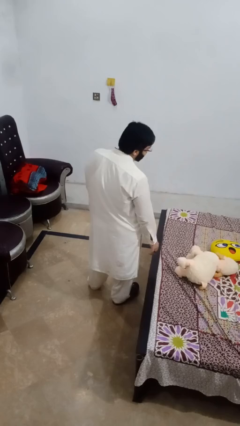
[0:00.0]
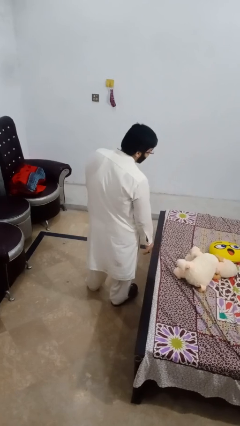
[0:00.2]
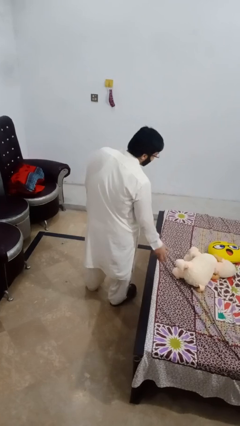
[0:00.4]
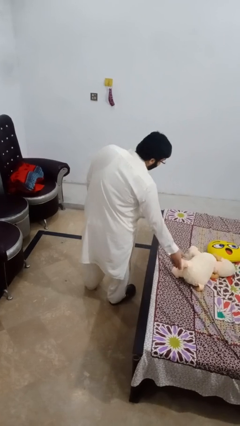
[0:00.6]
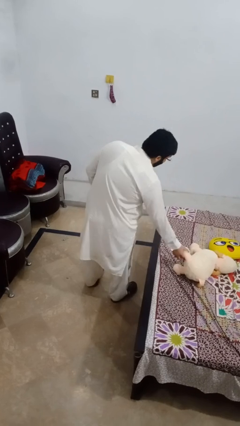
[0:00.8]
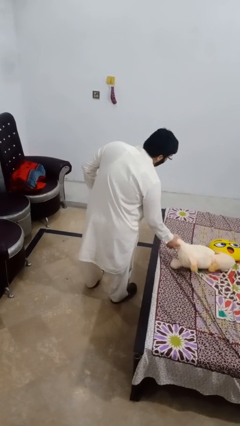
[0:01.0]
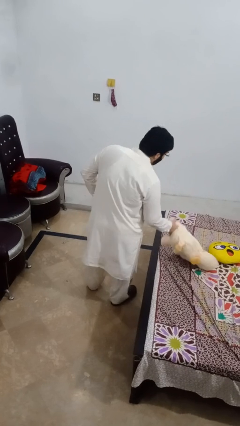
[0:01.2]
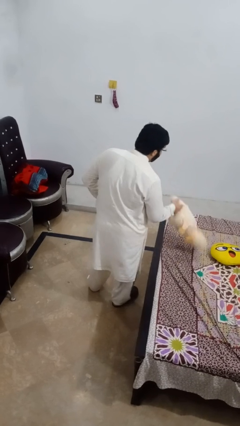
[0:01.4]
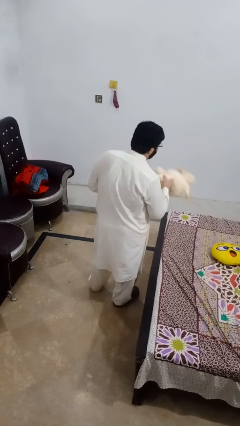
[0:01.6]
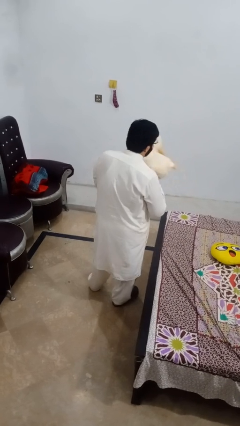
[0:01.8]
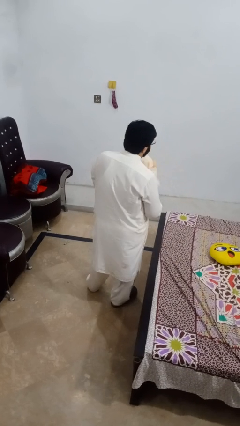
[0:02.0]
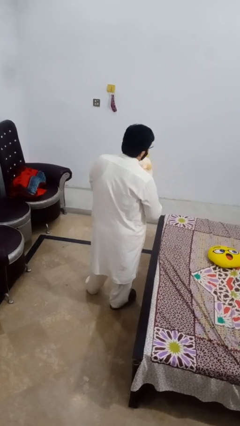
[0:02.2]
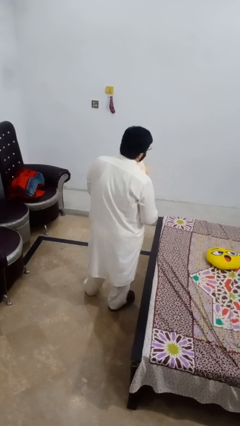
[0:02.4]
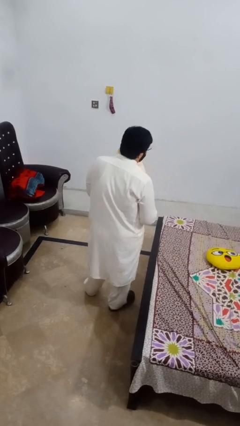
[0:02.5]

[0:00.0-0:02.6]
person picks up object from bed

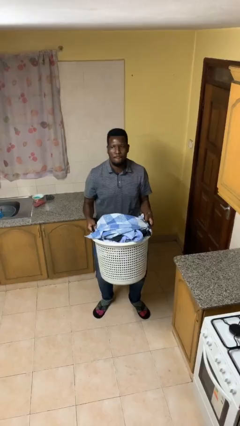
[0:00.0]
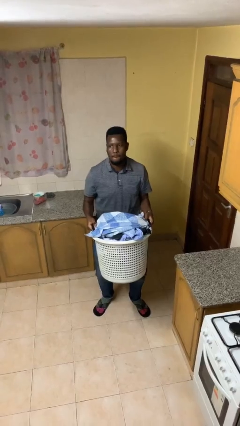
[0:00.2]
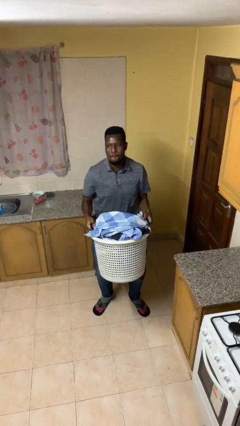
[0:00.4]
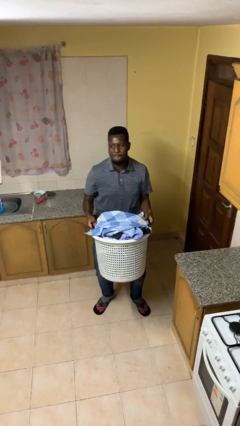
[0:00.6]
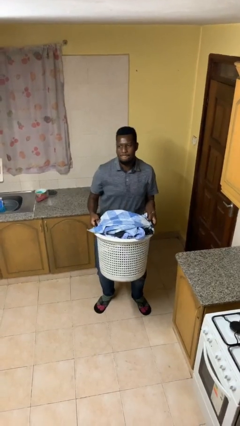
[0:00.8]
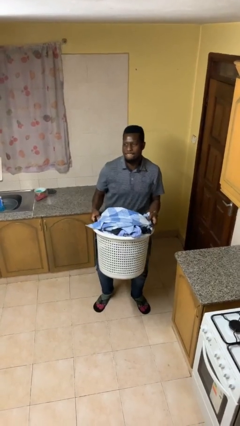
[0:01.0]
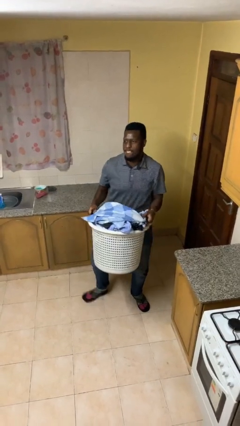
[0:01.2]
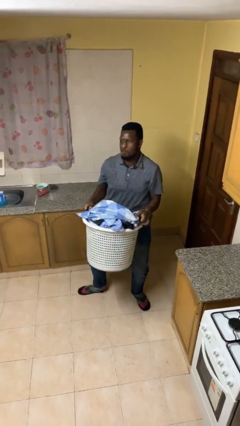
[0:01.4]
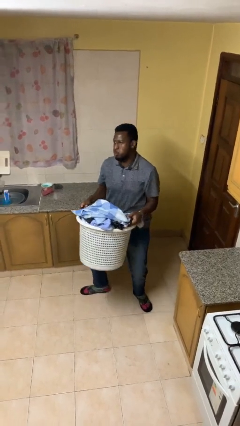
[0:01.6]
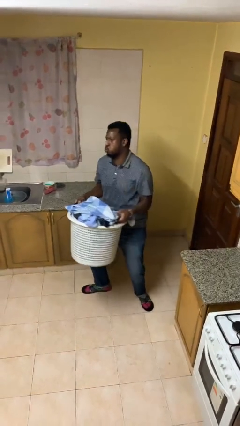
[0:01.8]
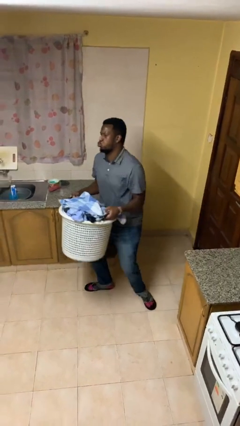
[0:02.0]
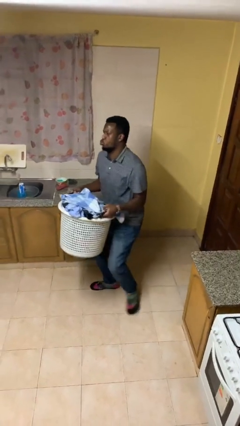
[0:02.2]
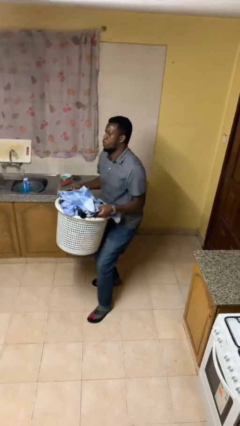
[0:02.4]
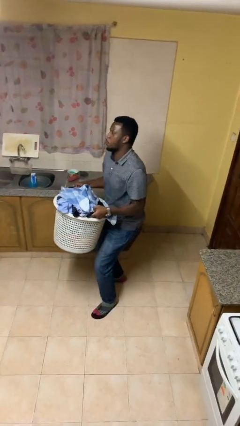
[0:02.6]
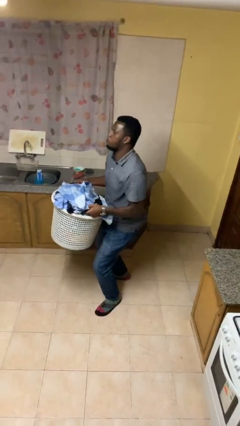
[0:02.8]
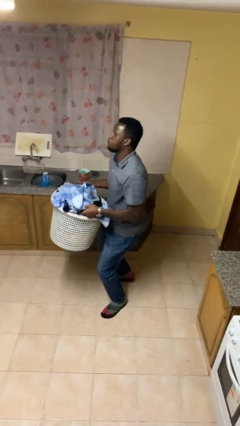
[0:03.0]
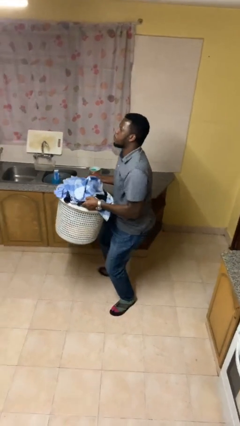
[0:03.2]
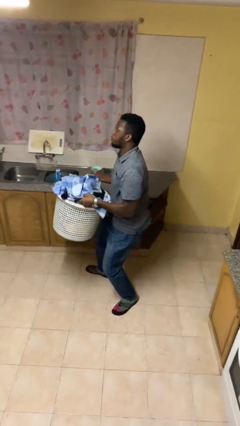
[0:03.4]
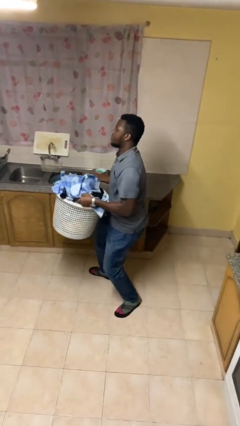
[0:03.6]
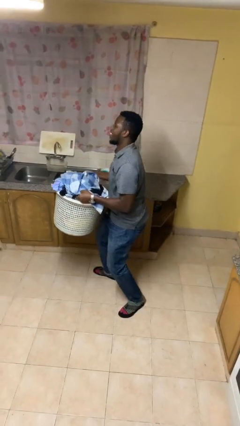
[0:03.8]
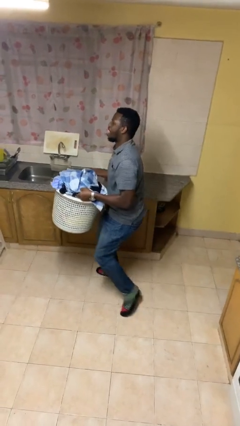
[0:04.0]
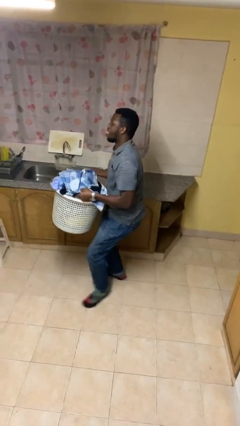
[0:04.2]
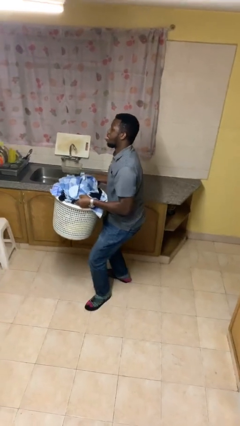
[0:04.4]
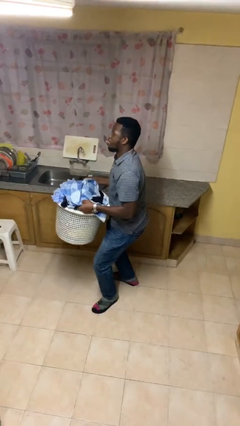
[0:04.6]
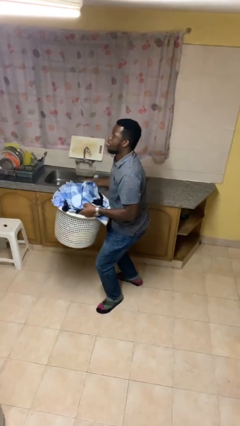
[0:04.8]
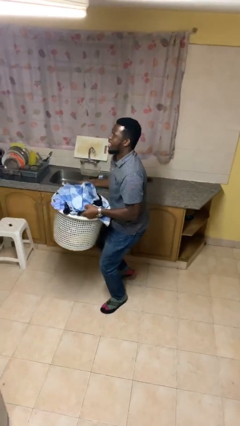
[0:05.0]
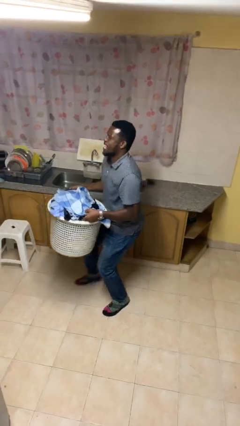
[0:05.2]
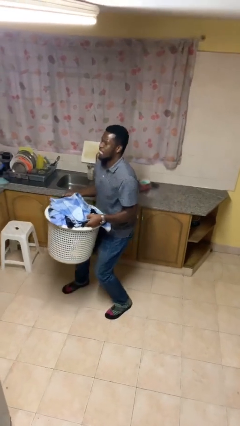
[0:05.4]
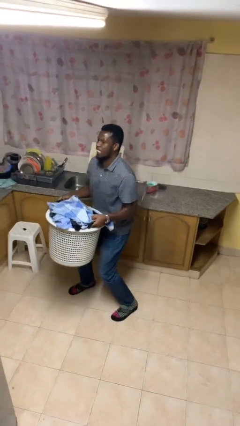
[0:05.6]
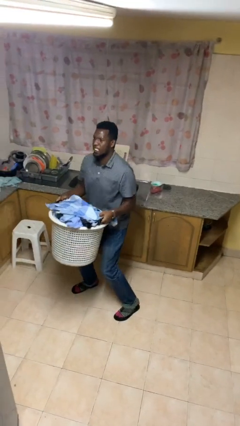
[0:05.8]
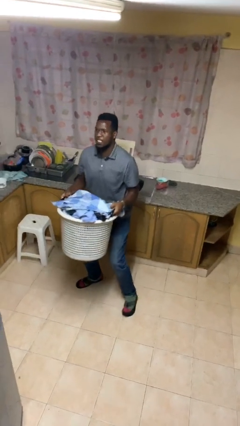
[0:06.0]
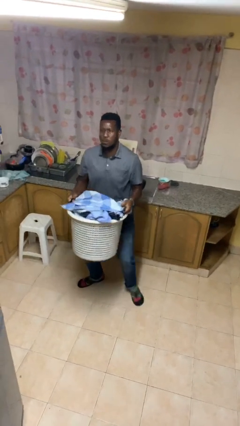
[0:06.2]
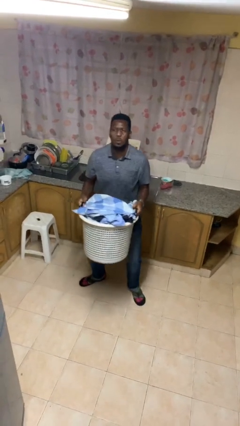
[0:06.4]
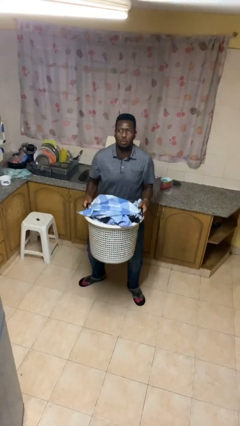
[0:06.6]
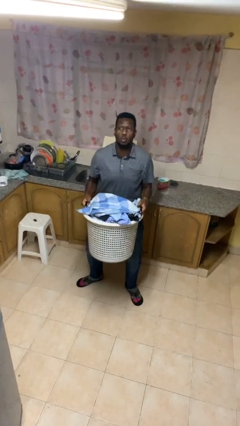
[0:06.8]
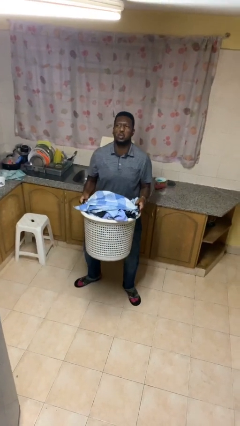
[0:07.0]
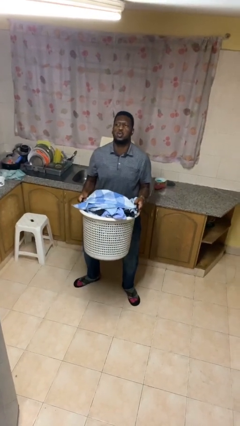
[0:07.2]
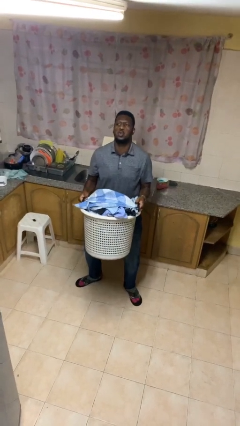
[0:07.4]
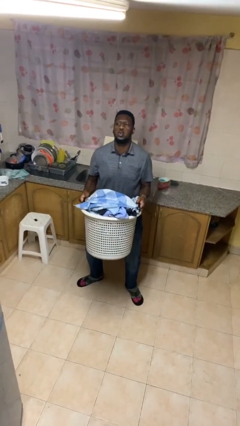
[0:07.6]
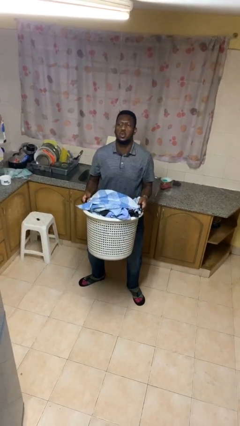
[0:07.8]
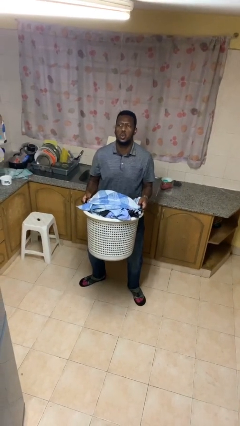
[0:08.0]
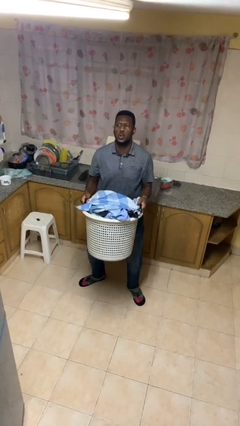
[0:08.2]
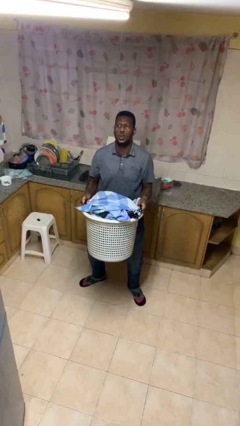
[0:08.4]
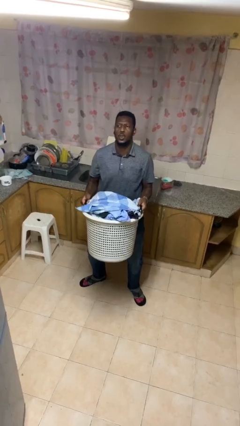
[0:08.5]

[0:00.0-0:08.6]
person carries heavy object

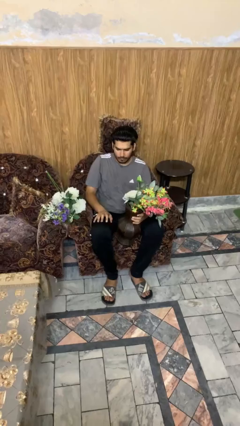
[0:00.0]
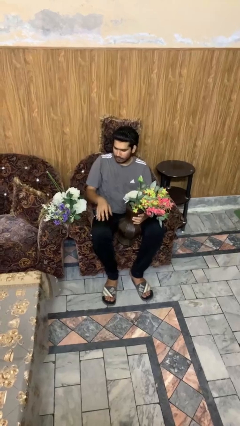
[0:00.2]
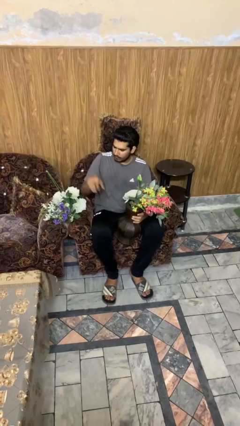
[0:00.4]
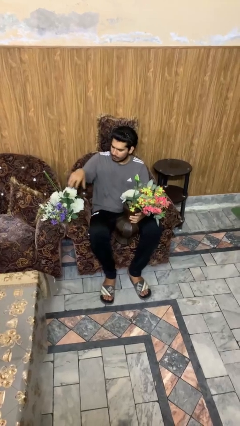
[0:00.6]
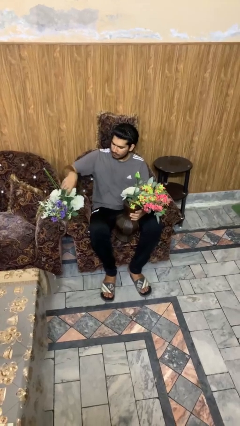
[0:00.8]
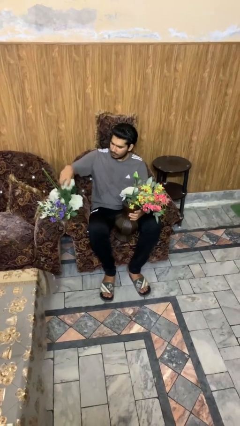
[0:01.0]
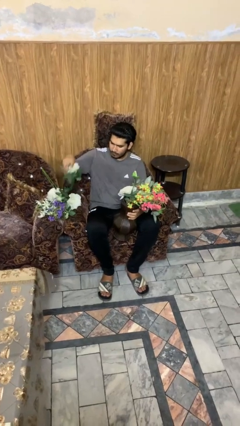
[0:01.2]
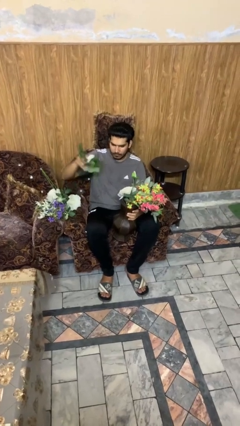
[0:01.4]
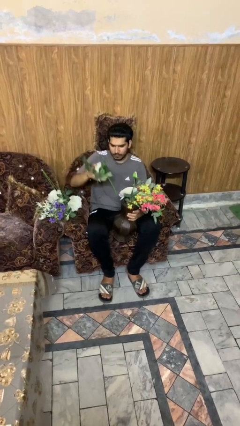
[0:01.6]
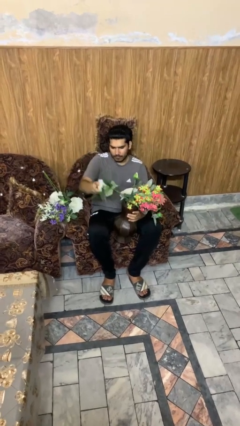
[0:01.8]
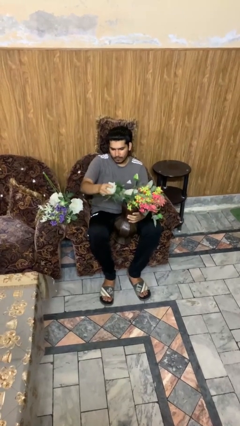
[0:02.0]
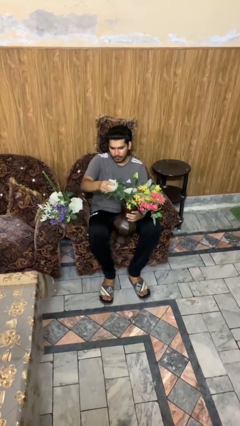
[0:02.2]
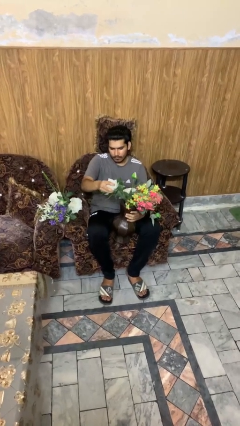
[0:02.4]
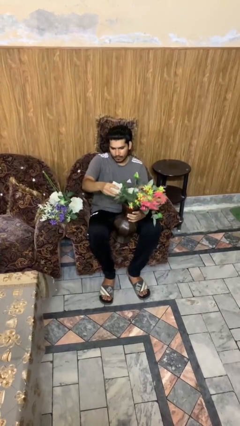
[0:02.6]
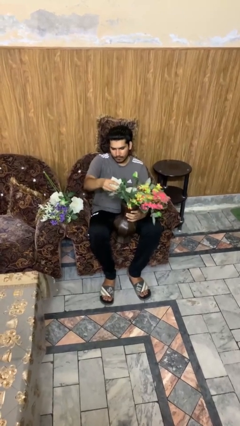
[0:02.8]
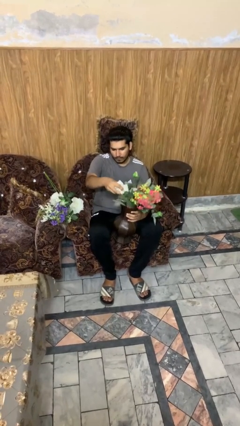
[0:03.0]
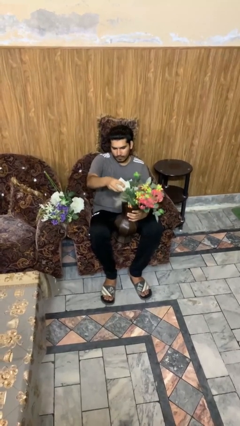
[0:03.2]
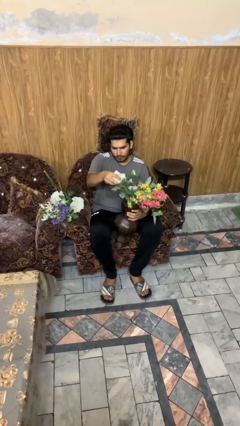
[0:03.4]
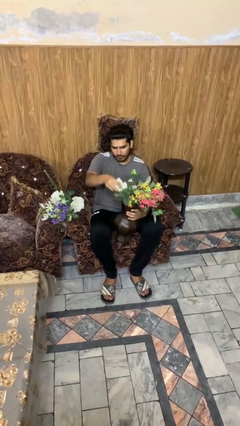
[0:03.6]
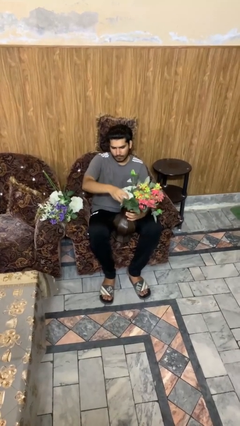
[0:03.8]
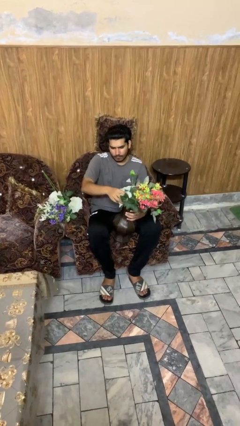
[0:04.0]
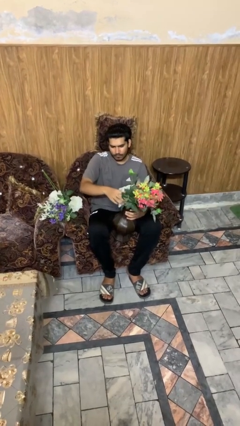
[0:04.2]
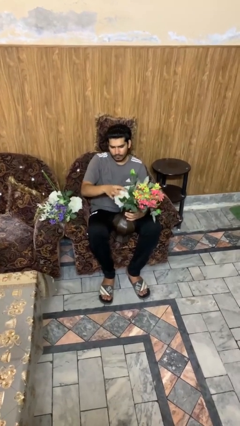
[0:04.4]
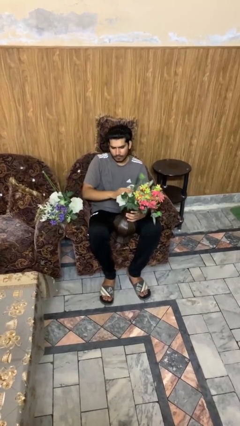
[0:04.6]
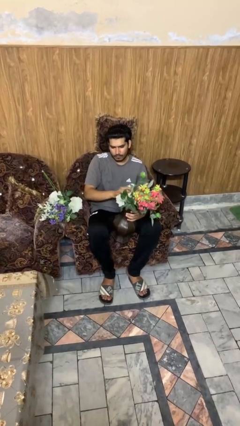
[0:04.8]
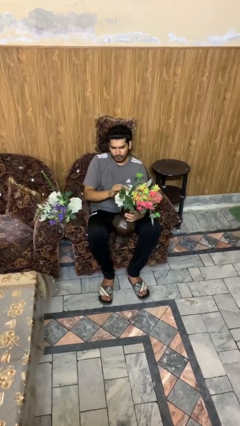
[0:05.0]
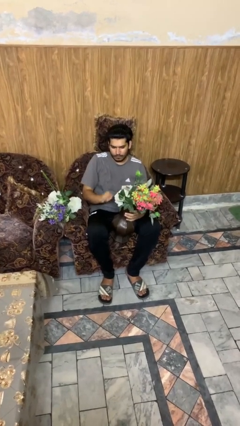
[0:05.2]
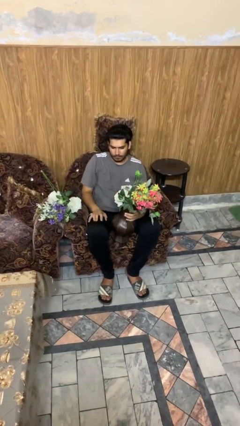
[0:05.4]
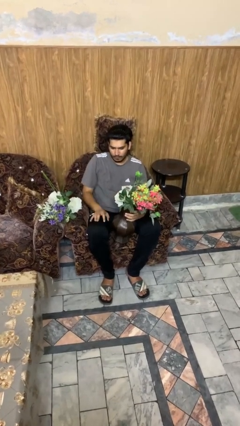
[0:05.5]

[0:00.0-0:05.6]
person arranges flowers in vase

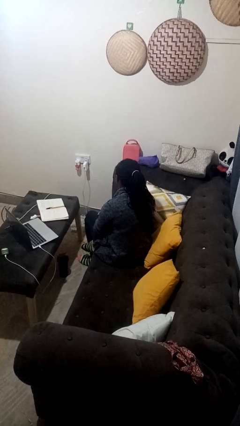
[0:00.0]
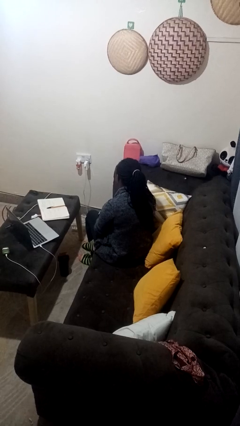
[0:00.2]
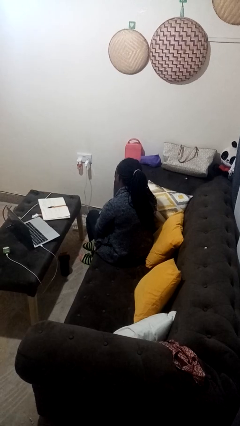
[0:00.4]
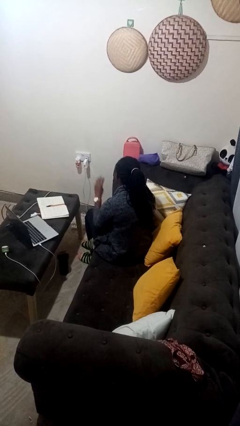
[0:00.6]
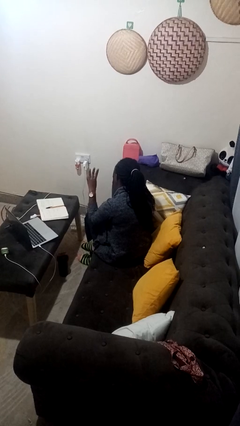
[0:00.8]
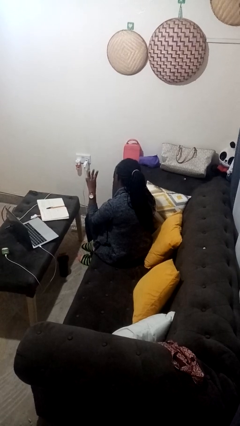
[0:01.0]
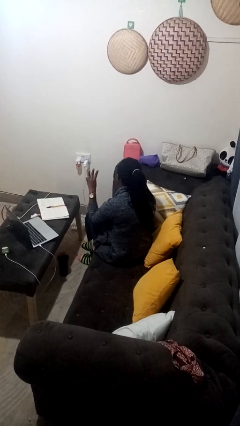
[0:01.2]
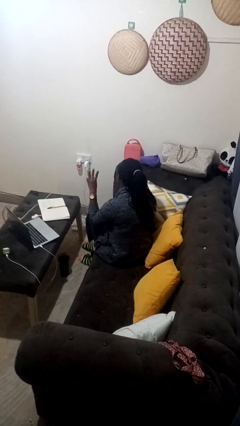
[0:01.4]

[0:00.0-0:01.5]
person gestures number three
